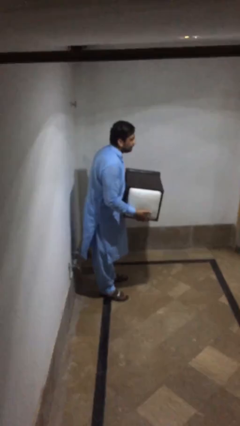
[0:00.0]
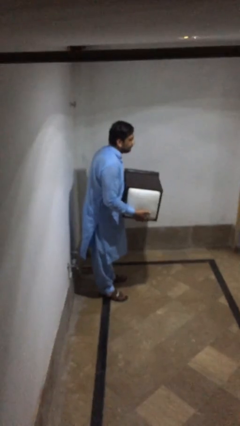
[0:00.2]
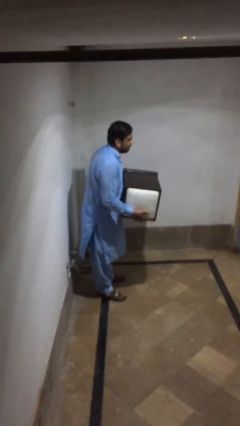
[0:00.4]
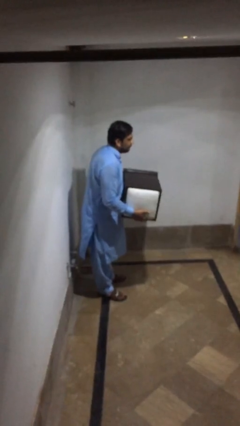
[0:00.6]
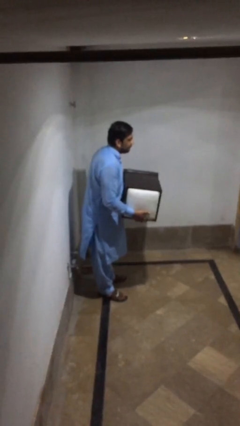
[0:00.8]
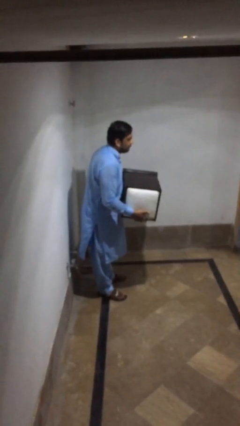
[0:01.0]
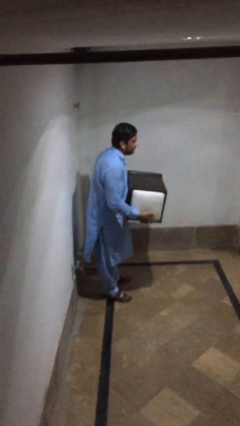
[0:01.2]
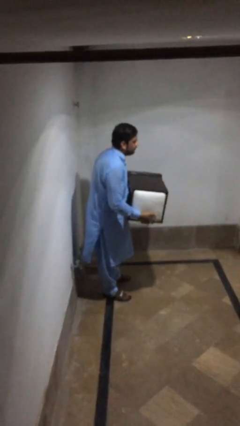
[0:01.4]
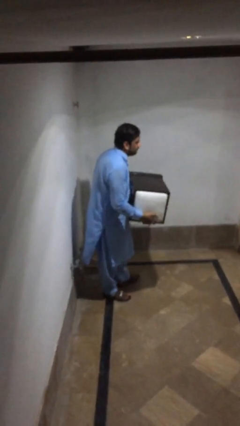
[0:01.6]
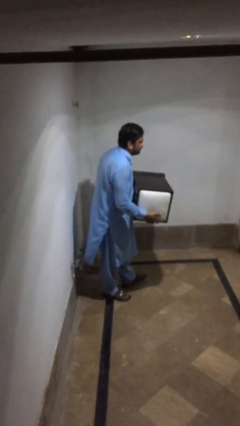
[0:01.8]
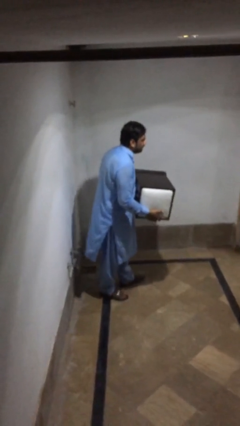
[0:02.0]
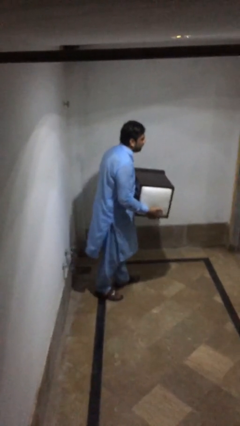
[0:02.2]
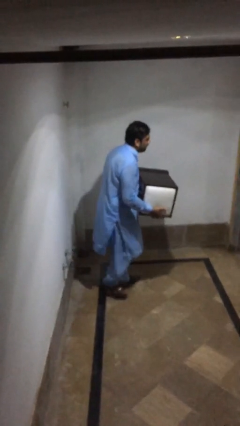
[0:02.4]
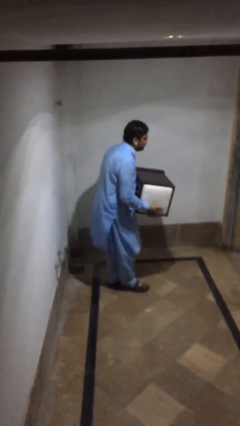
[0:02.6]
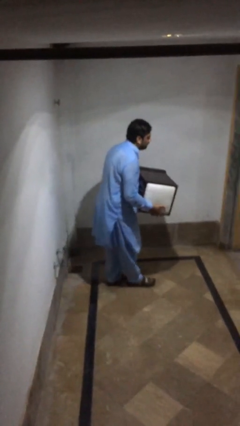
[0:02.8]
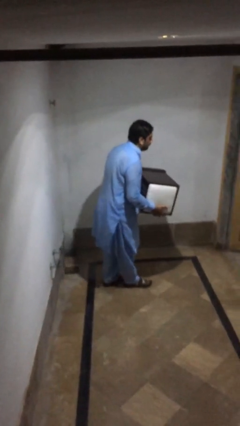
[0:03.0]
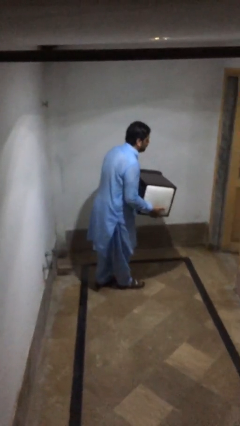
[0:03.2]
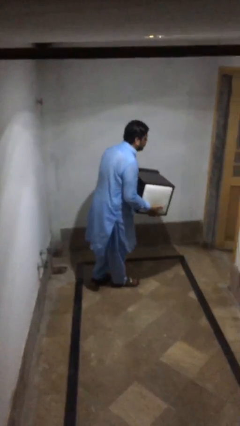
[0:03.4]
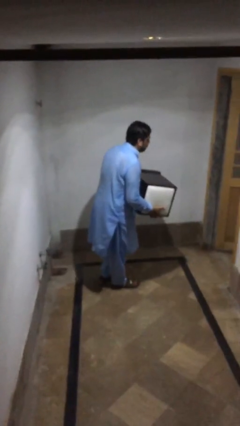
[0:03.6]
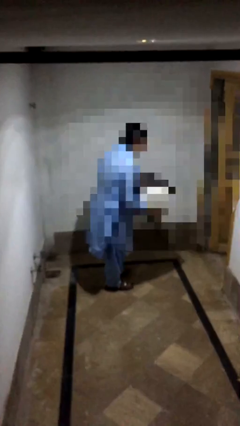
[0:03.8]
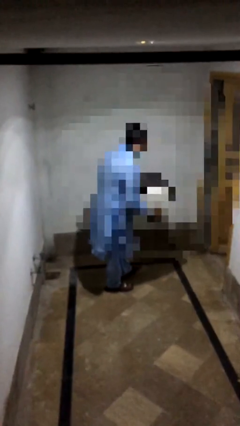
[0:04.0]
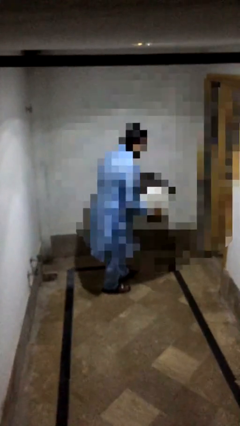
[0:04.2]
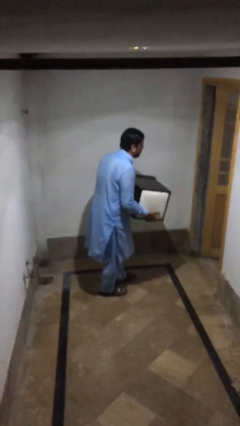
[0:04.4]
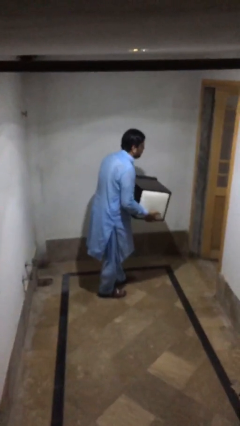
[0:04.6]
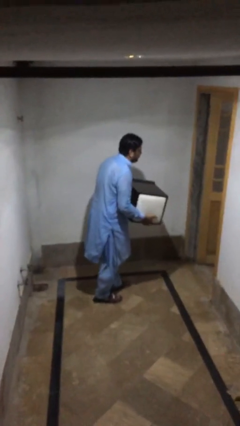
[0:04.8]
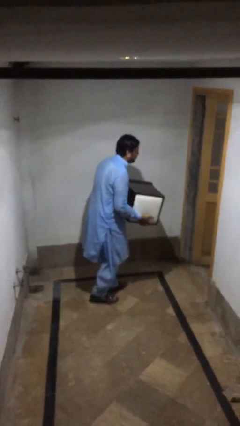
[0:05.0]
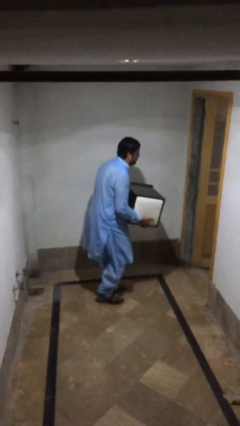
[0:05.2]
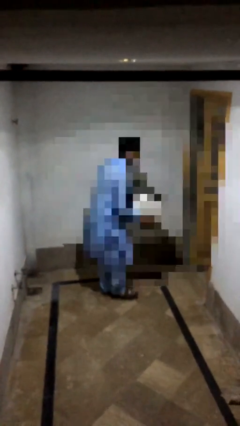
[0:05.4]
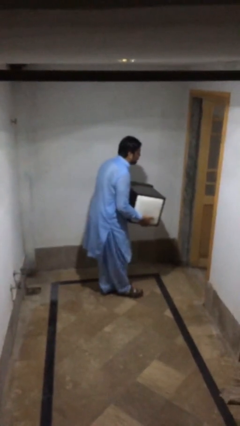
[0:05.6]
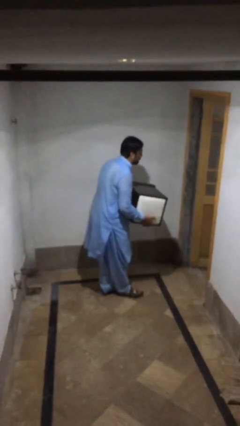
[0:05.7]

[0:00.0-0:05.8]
person carries heavy object

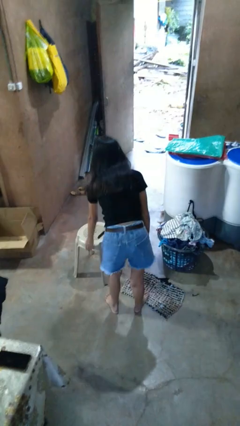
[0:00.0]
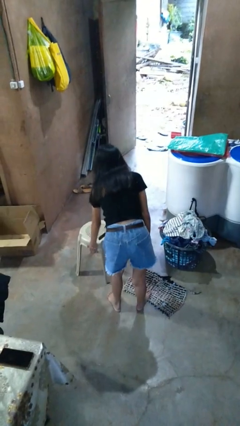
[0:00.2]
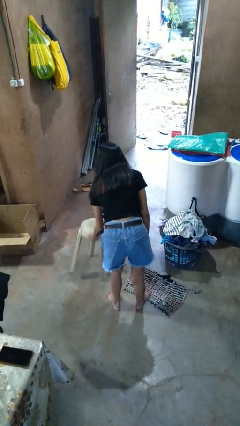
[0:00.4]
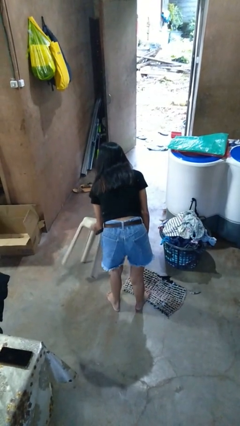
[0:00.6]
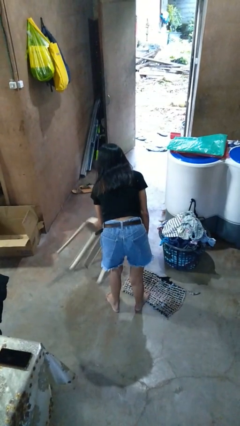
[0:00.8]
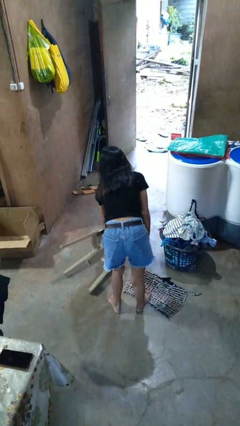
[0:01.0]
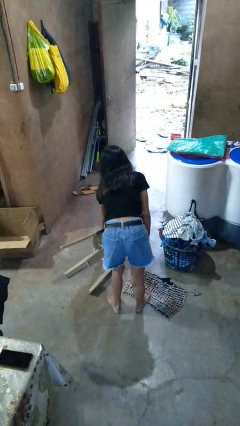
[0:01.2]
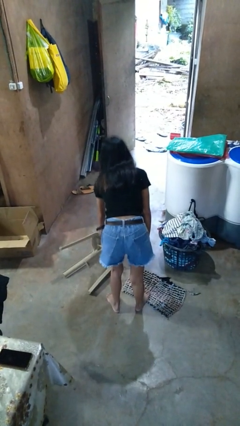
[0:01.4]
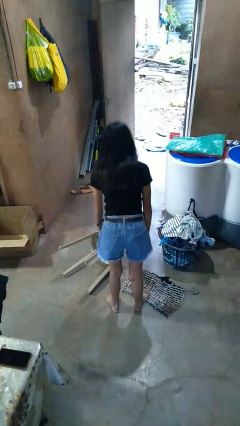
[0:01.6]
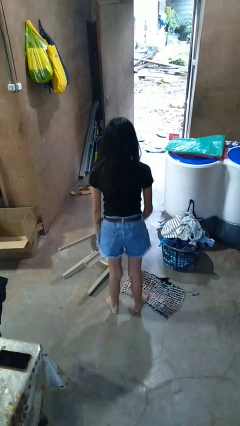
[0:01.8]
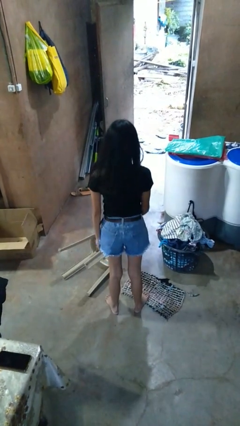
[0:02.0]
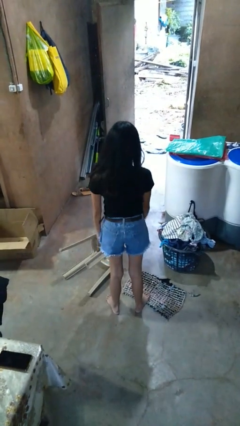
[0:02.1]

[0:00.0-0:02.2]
person knocks over furniture

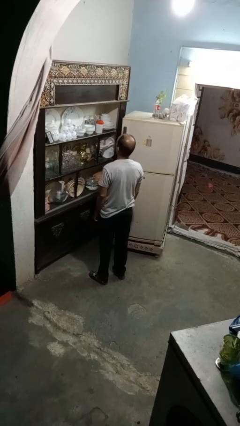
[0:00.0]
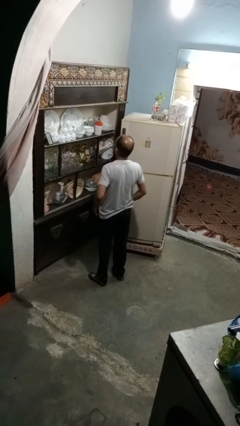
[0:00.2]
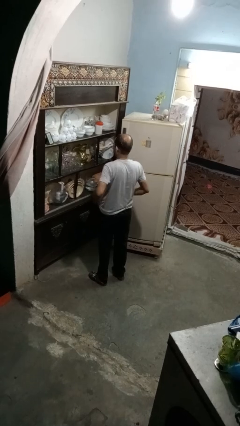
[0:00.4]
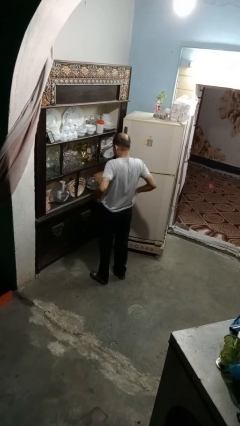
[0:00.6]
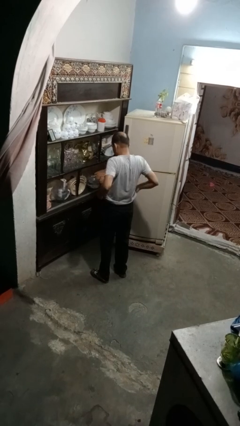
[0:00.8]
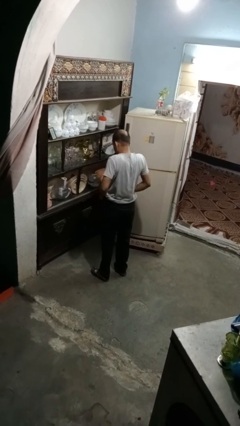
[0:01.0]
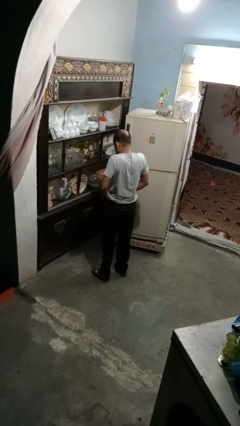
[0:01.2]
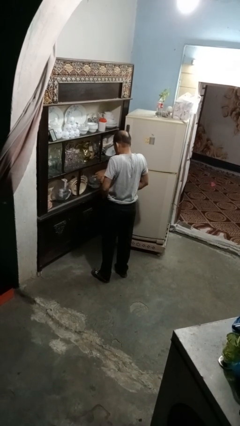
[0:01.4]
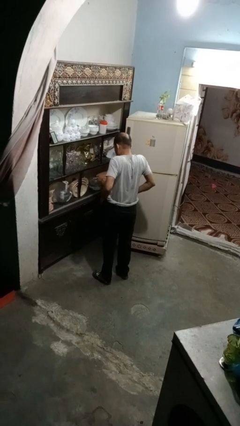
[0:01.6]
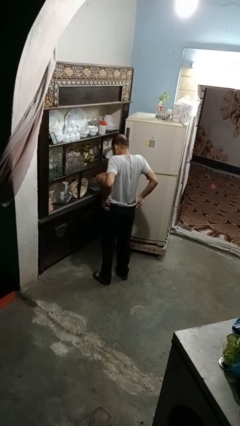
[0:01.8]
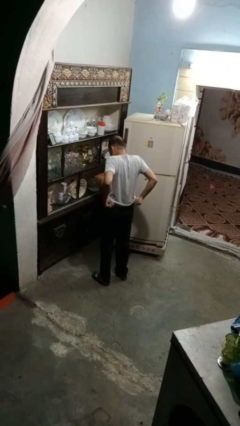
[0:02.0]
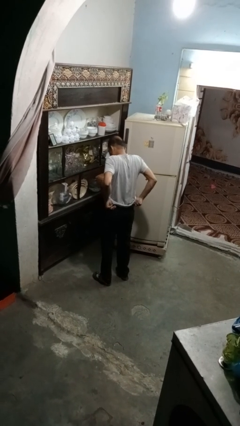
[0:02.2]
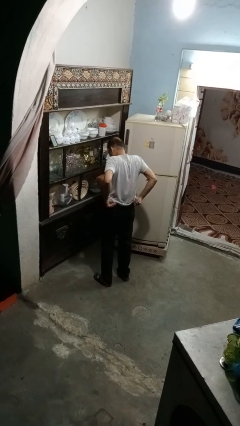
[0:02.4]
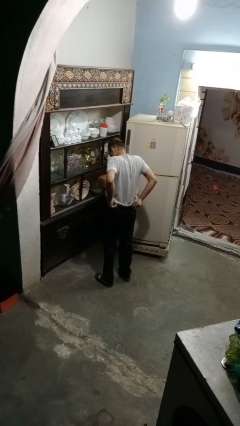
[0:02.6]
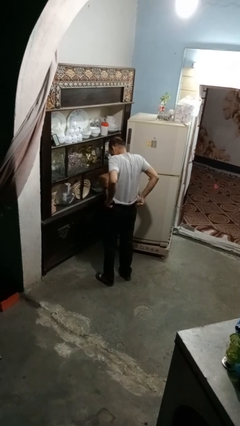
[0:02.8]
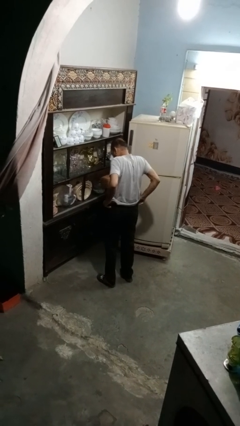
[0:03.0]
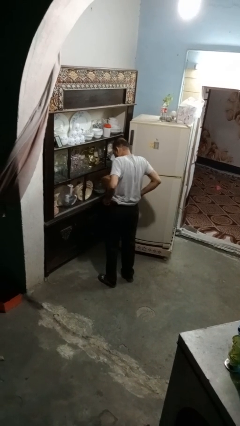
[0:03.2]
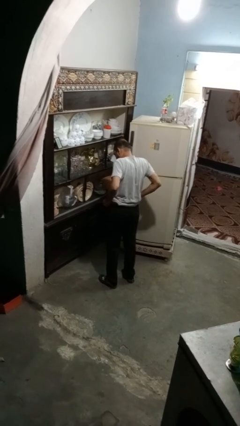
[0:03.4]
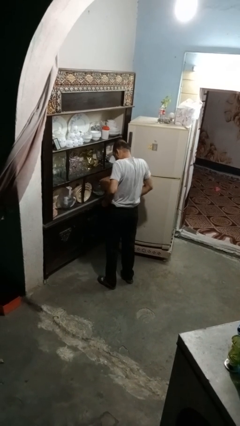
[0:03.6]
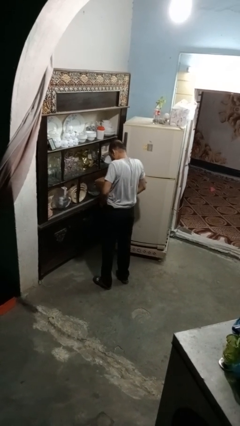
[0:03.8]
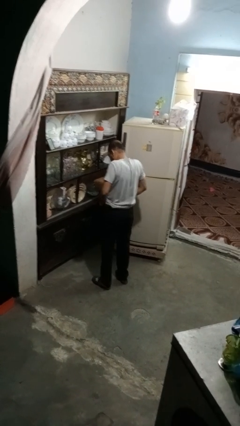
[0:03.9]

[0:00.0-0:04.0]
person hikes up pants

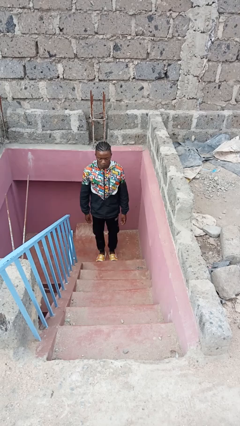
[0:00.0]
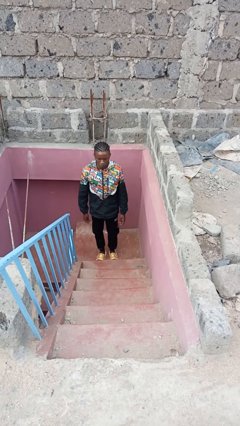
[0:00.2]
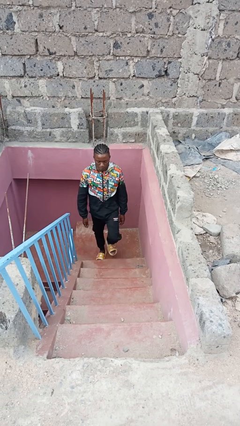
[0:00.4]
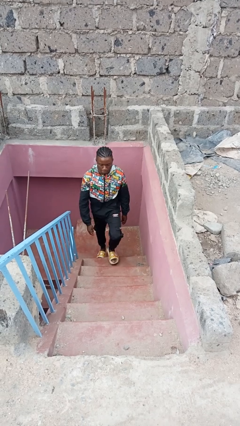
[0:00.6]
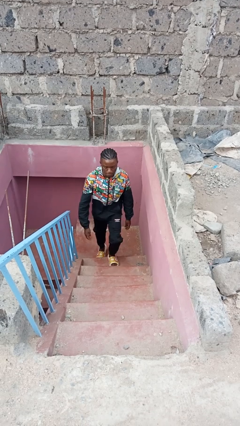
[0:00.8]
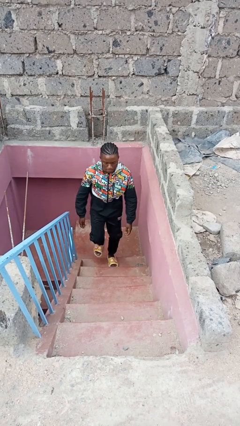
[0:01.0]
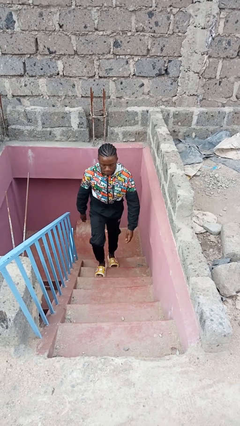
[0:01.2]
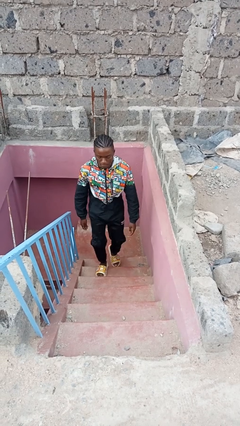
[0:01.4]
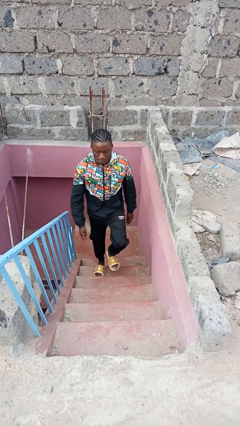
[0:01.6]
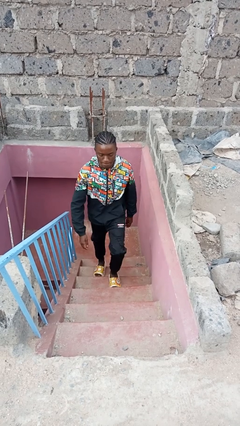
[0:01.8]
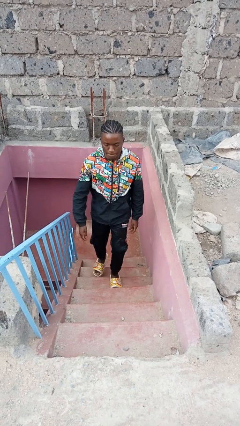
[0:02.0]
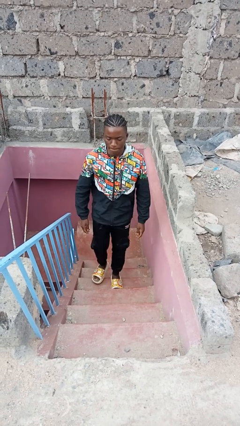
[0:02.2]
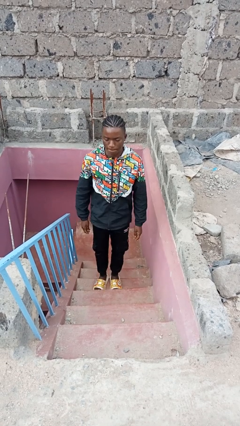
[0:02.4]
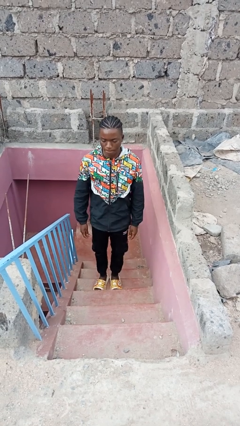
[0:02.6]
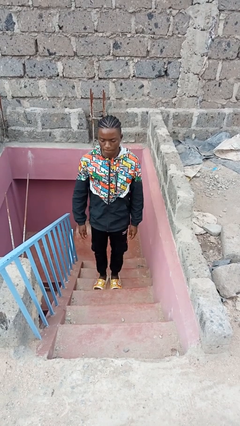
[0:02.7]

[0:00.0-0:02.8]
person climbs up stairs

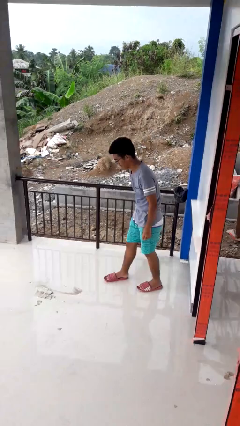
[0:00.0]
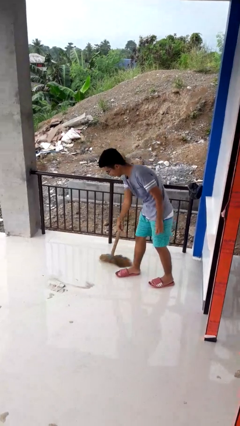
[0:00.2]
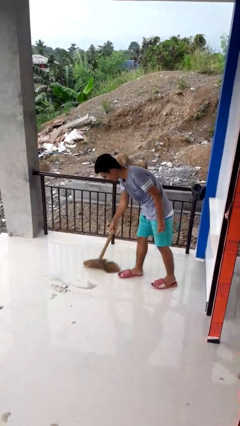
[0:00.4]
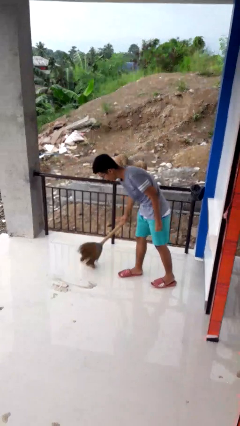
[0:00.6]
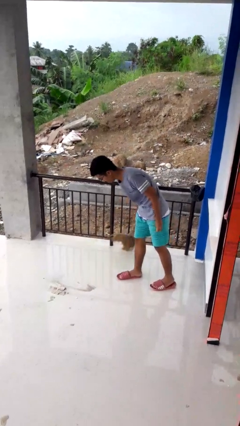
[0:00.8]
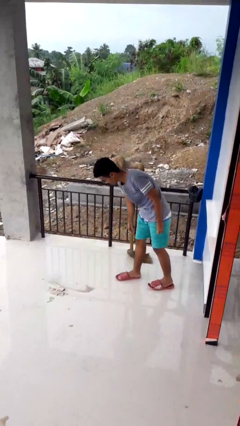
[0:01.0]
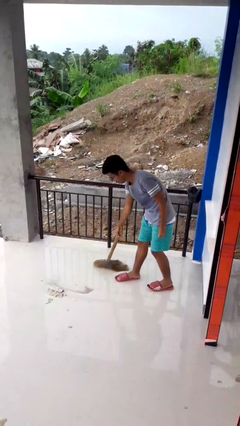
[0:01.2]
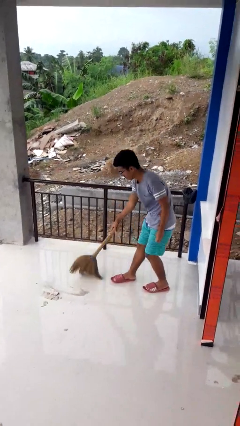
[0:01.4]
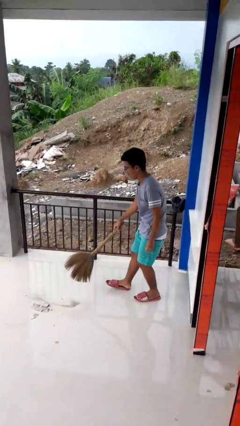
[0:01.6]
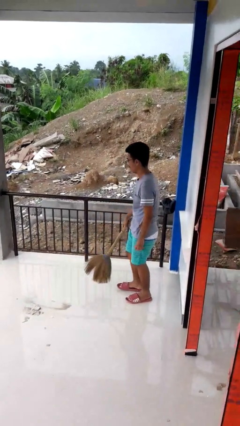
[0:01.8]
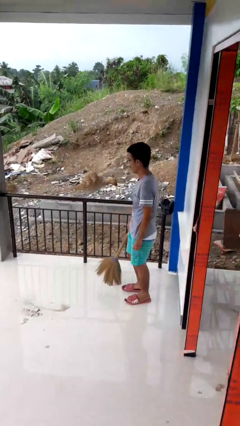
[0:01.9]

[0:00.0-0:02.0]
person sweeps floor

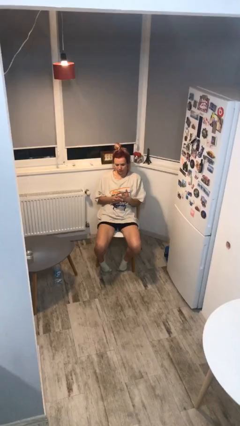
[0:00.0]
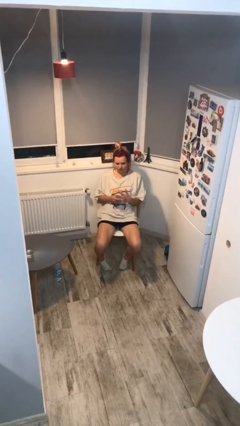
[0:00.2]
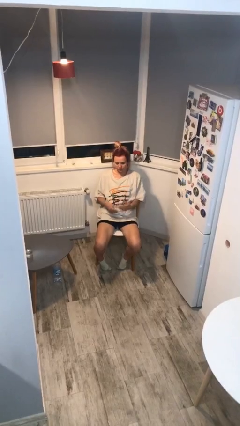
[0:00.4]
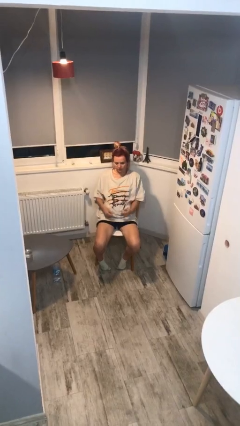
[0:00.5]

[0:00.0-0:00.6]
person puts on ring
